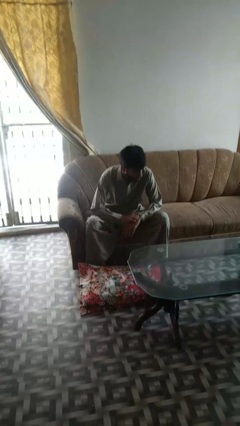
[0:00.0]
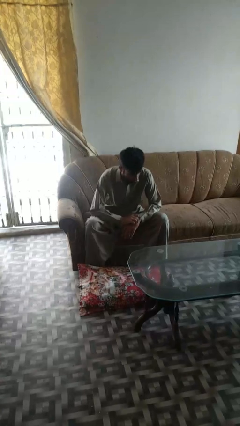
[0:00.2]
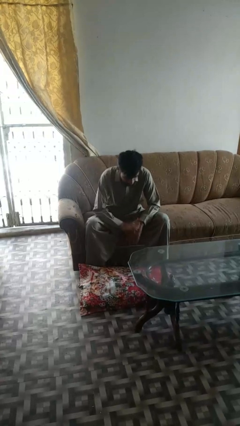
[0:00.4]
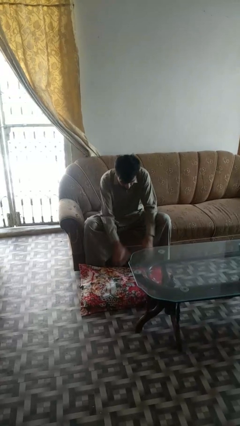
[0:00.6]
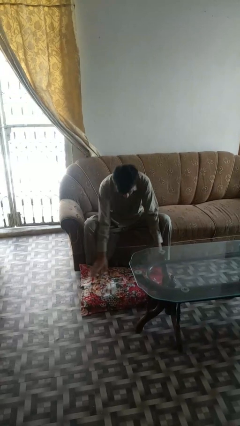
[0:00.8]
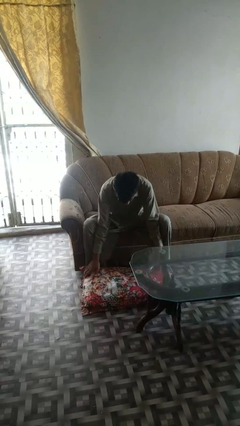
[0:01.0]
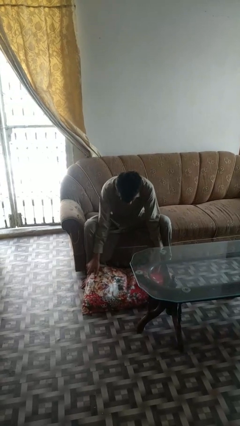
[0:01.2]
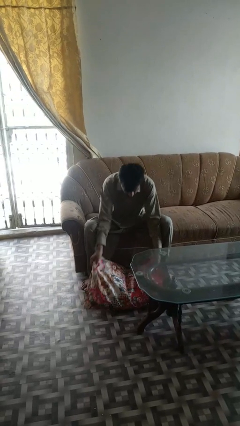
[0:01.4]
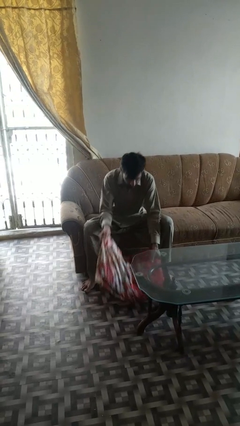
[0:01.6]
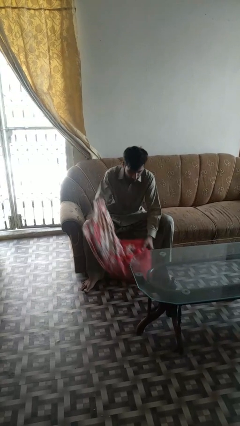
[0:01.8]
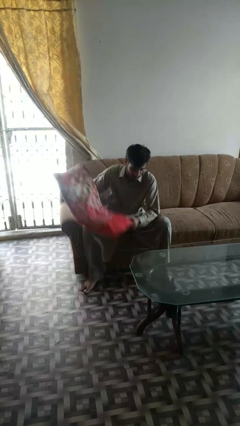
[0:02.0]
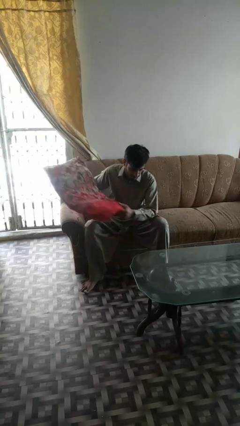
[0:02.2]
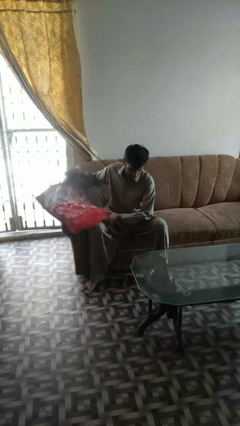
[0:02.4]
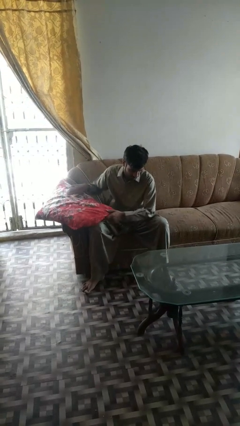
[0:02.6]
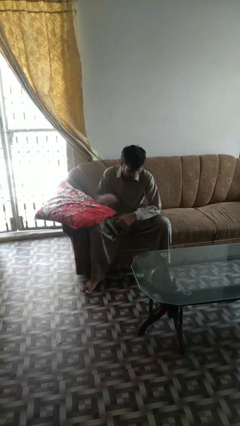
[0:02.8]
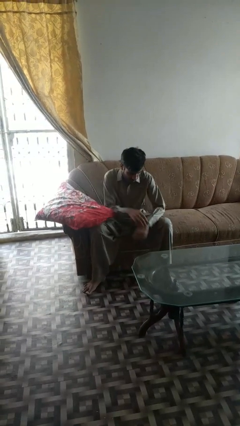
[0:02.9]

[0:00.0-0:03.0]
person picks up object from floor

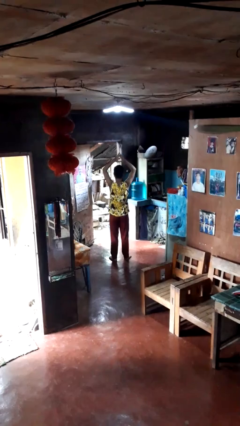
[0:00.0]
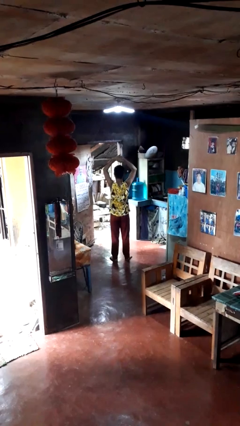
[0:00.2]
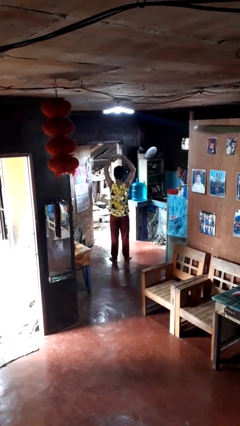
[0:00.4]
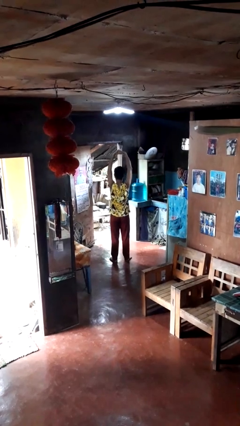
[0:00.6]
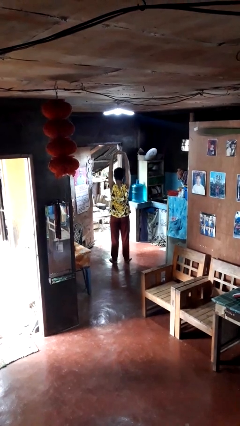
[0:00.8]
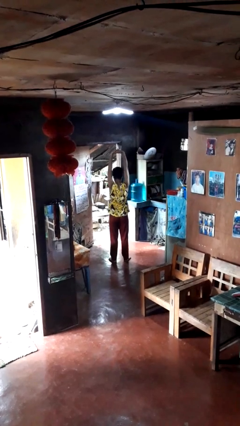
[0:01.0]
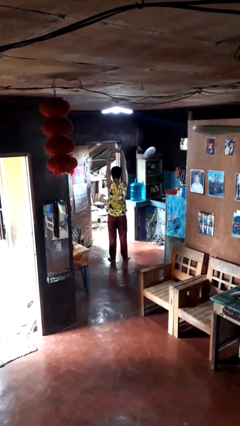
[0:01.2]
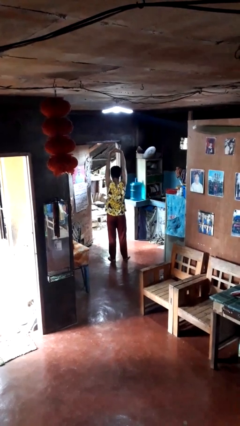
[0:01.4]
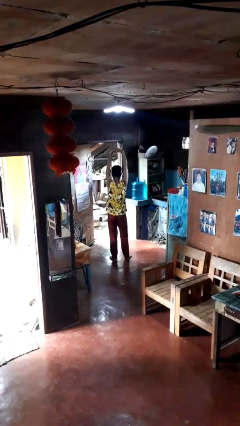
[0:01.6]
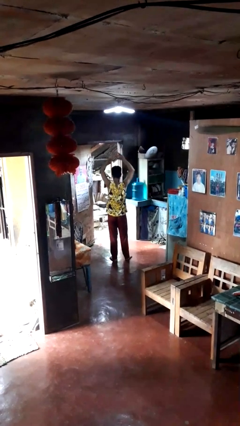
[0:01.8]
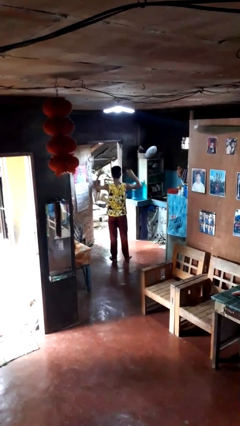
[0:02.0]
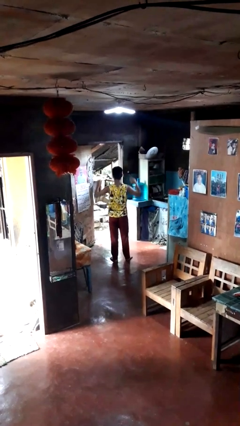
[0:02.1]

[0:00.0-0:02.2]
person stretches arms over head

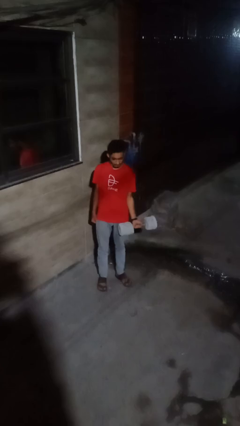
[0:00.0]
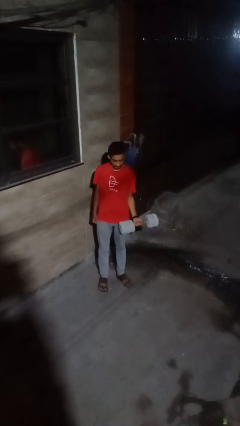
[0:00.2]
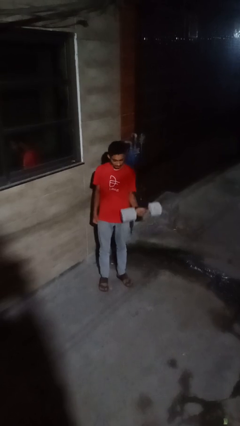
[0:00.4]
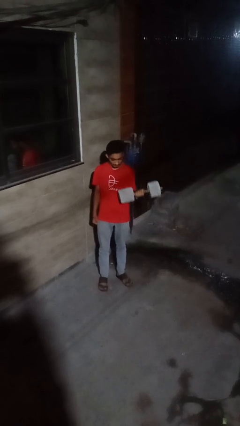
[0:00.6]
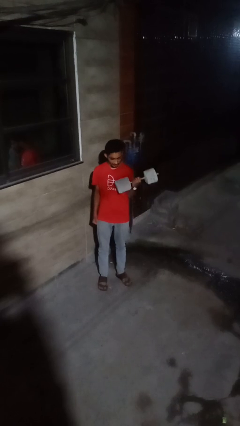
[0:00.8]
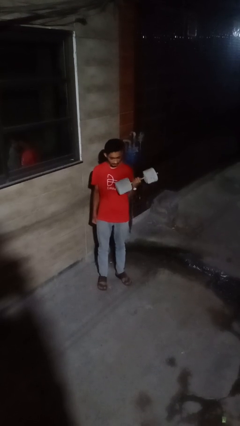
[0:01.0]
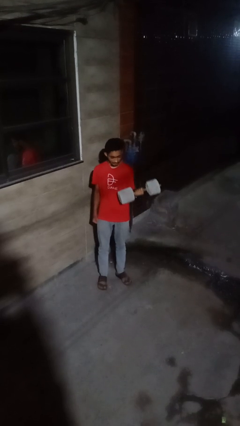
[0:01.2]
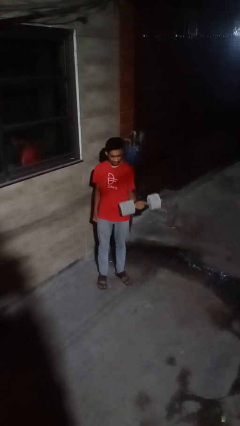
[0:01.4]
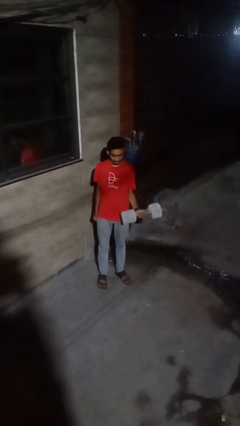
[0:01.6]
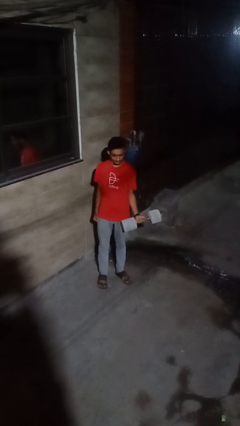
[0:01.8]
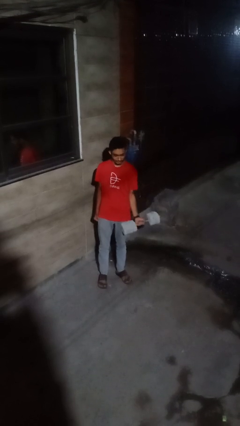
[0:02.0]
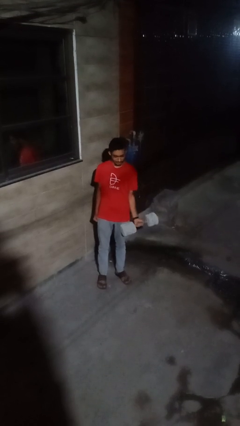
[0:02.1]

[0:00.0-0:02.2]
person lifts dumbbells

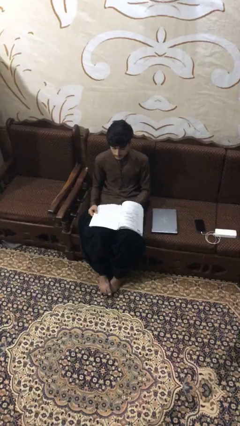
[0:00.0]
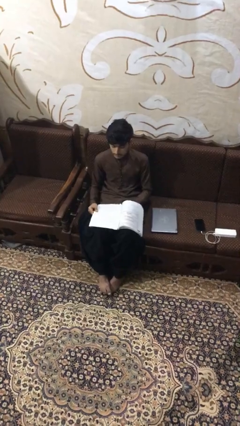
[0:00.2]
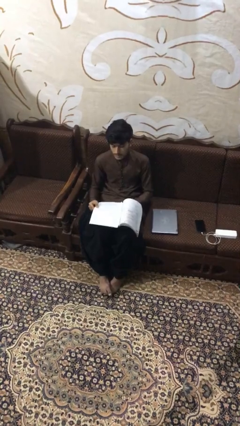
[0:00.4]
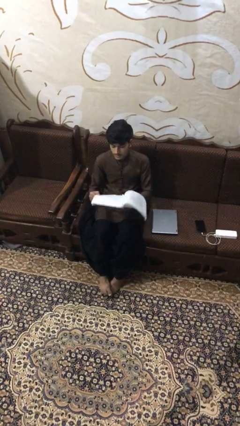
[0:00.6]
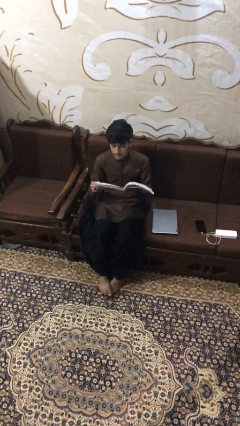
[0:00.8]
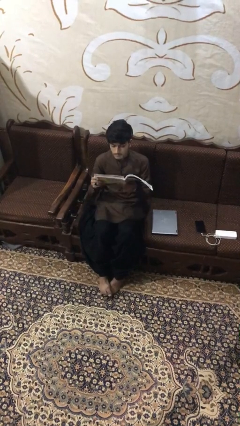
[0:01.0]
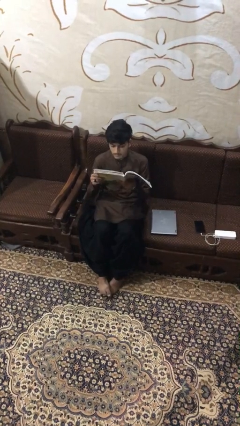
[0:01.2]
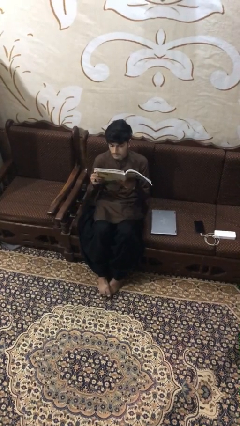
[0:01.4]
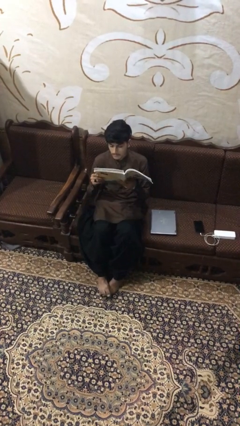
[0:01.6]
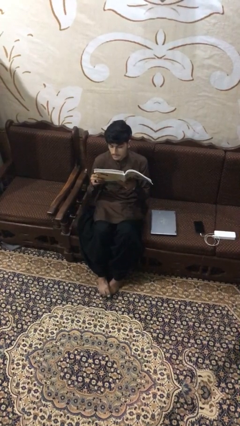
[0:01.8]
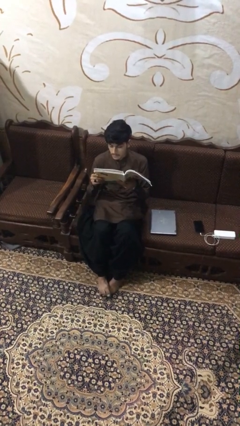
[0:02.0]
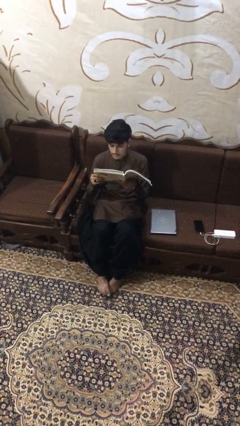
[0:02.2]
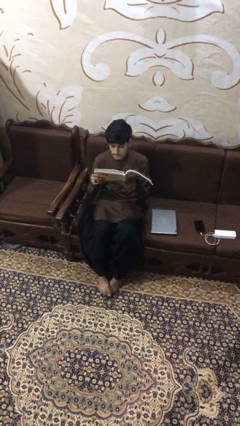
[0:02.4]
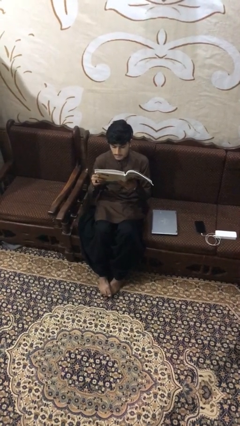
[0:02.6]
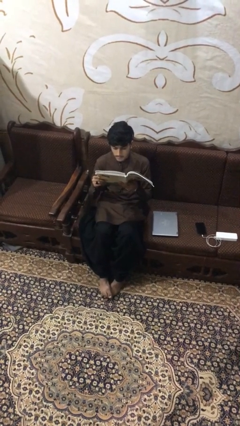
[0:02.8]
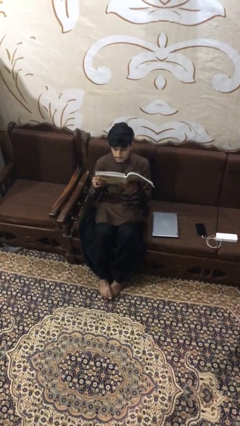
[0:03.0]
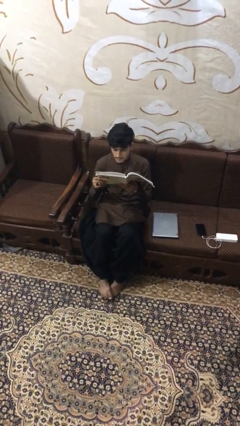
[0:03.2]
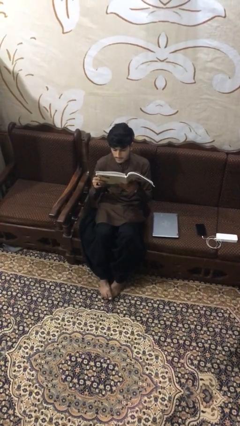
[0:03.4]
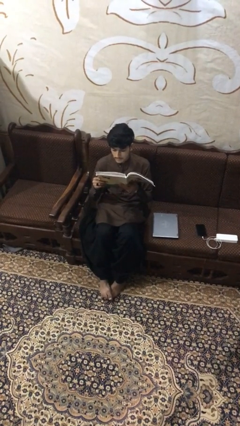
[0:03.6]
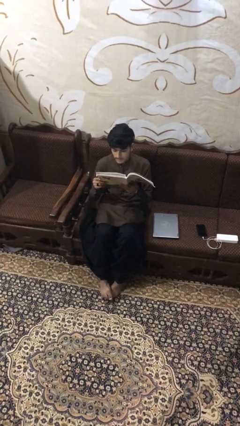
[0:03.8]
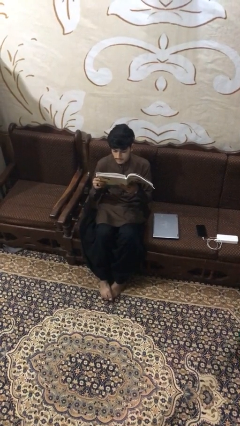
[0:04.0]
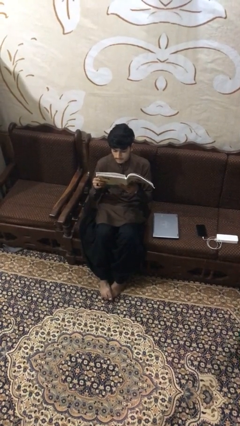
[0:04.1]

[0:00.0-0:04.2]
person reads document

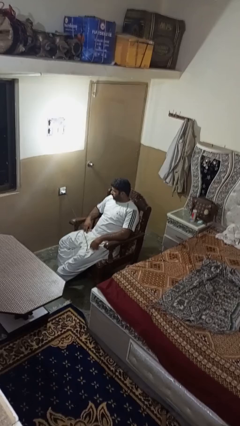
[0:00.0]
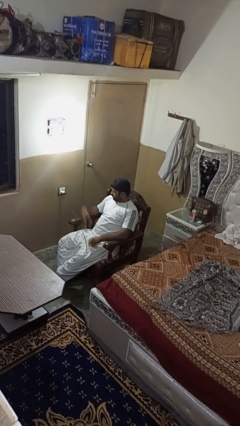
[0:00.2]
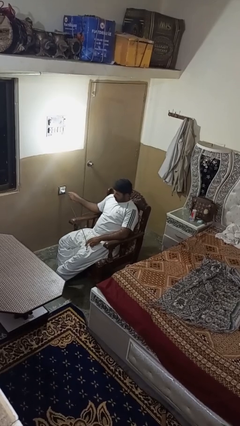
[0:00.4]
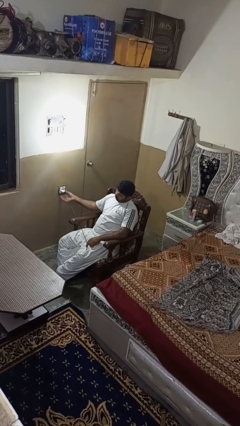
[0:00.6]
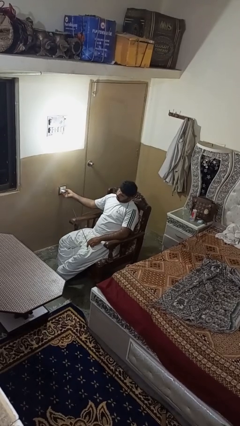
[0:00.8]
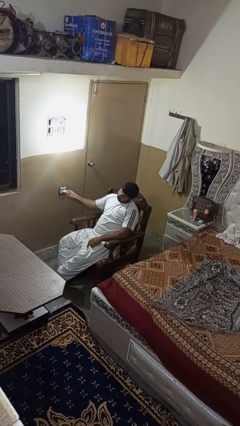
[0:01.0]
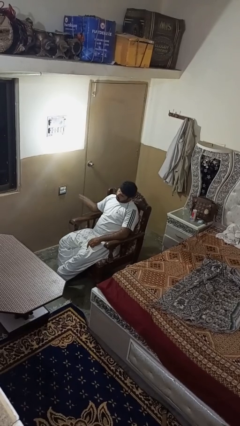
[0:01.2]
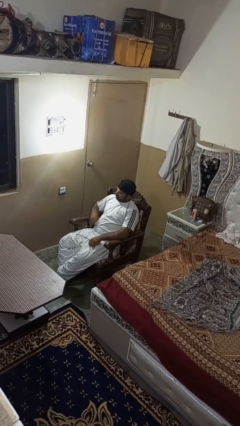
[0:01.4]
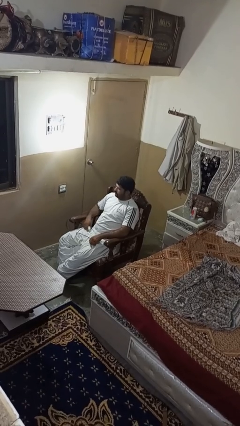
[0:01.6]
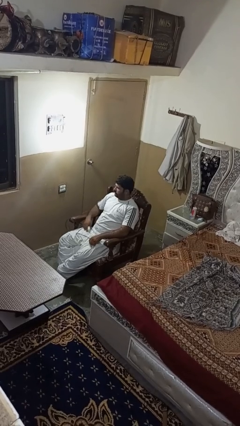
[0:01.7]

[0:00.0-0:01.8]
person unplugs from electrical socket

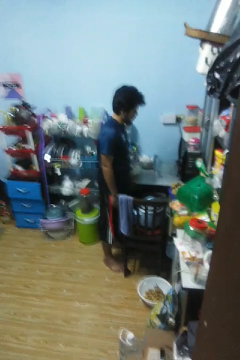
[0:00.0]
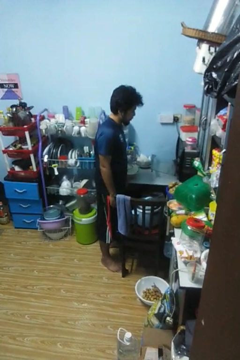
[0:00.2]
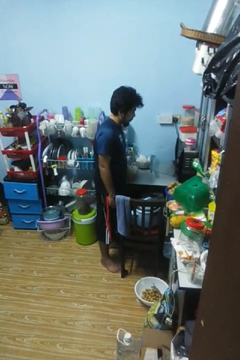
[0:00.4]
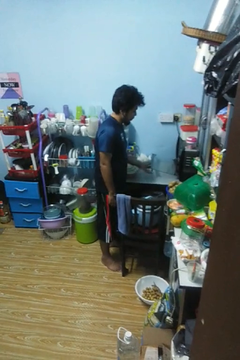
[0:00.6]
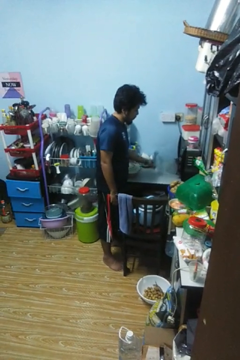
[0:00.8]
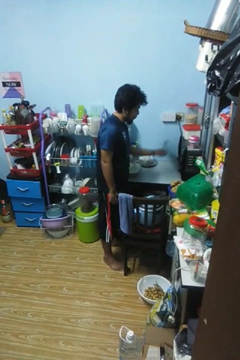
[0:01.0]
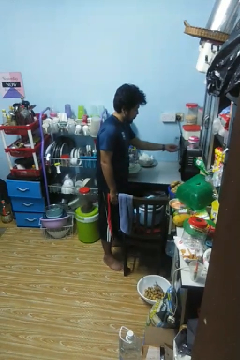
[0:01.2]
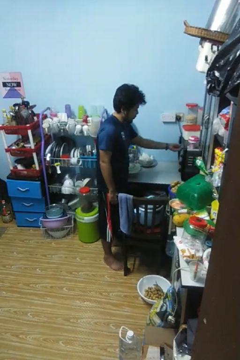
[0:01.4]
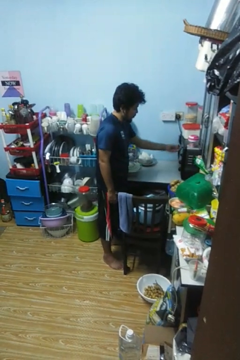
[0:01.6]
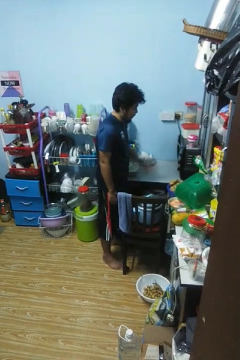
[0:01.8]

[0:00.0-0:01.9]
person closes oven door

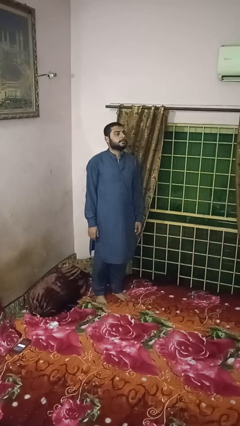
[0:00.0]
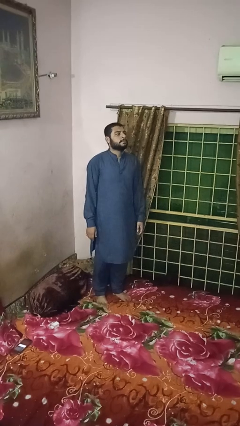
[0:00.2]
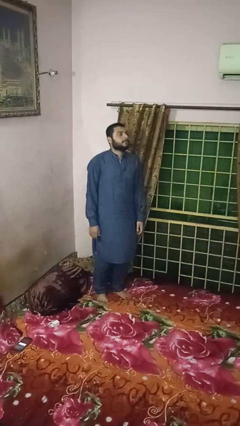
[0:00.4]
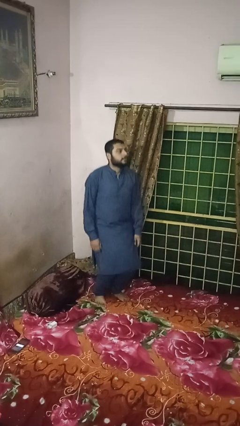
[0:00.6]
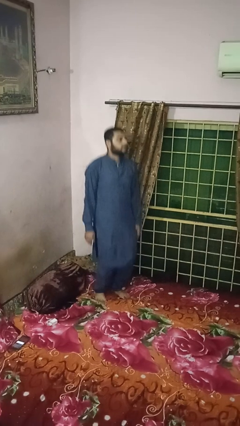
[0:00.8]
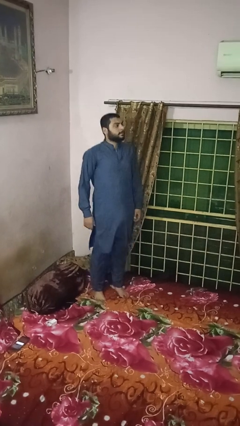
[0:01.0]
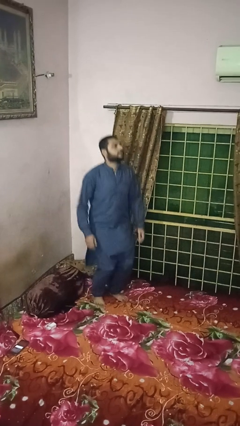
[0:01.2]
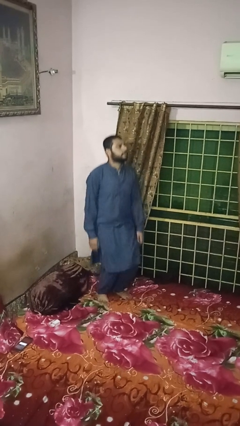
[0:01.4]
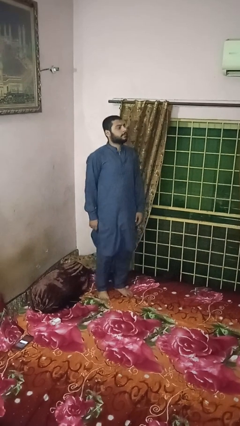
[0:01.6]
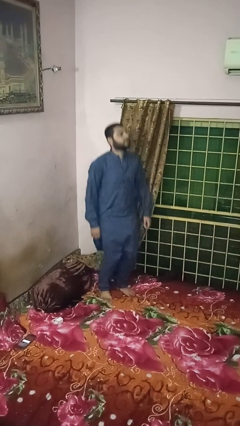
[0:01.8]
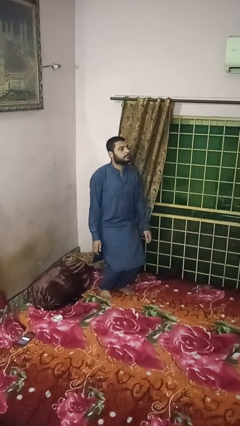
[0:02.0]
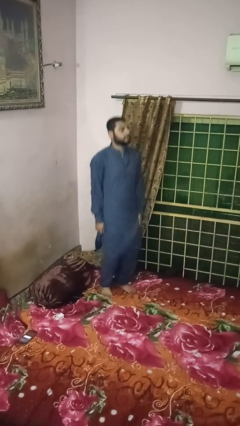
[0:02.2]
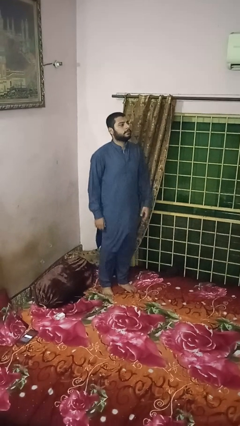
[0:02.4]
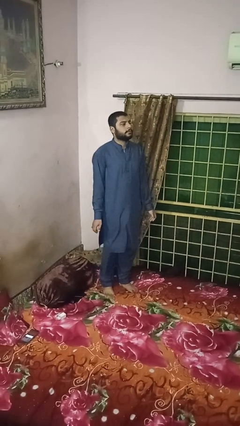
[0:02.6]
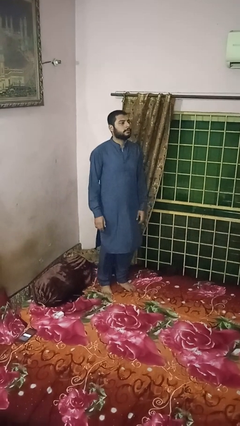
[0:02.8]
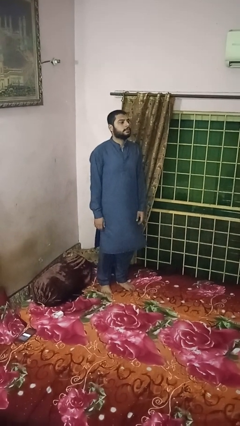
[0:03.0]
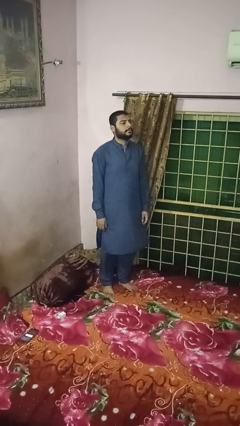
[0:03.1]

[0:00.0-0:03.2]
person jumps on bed
